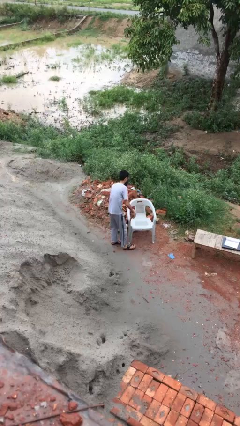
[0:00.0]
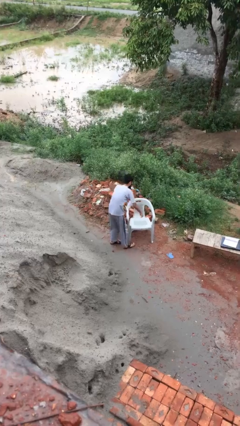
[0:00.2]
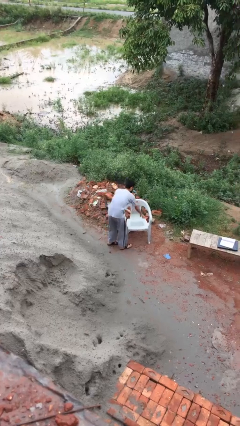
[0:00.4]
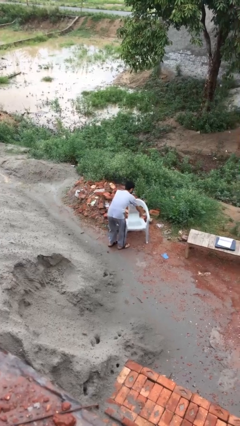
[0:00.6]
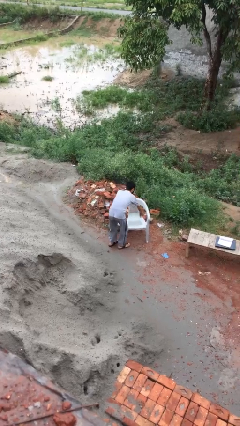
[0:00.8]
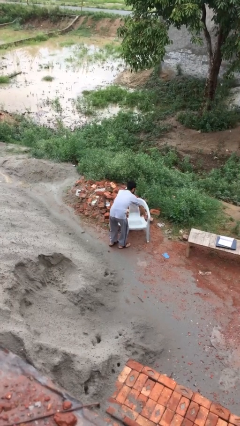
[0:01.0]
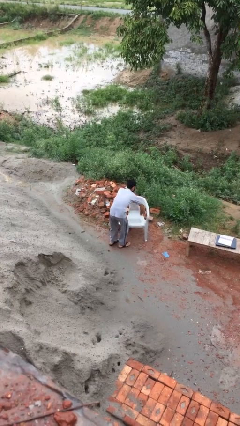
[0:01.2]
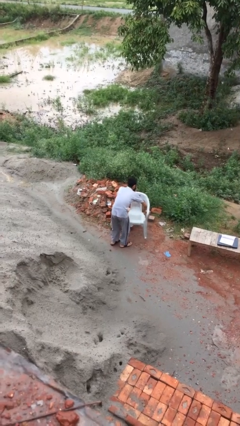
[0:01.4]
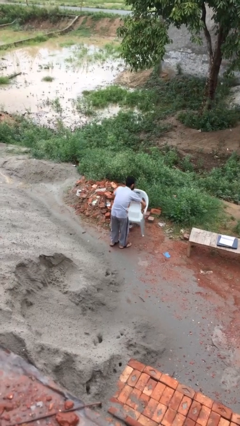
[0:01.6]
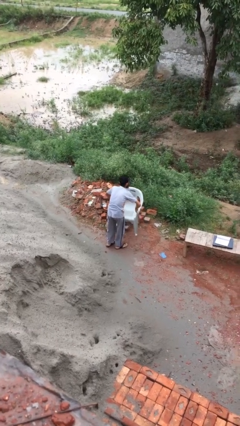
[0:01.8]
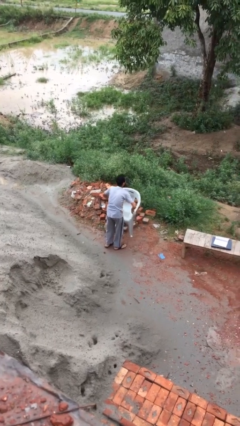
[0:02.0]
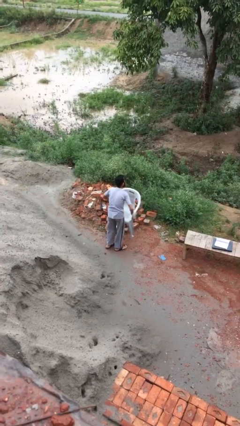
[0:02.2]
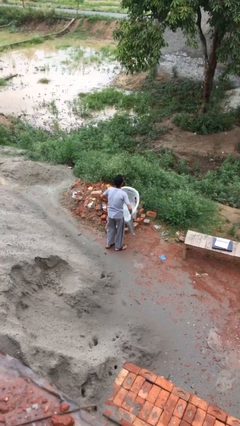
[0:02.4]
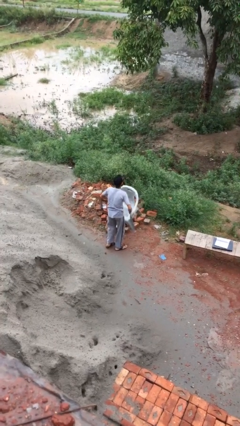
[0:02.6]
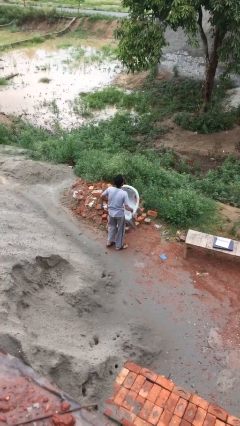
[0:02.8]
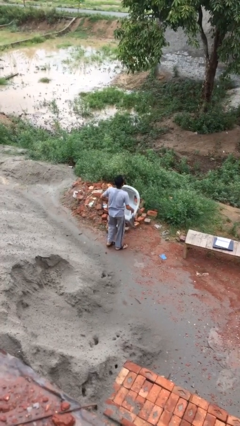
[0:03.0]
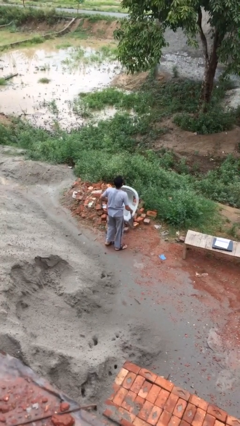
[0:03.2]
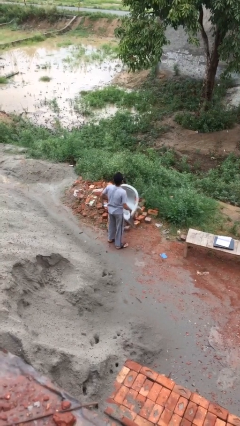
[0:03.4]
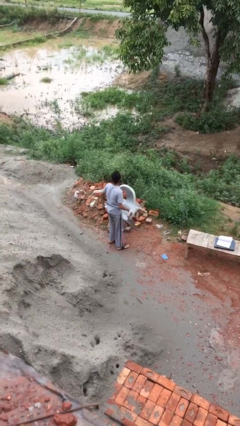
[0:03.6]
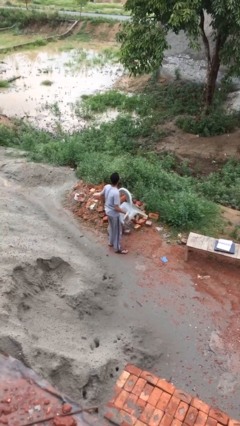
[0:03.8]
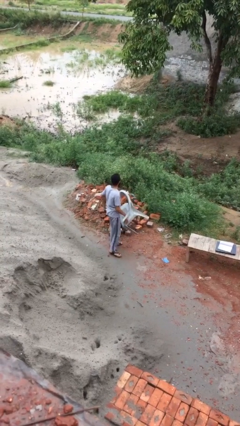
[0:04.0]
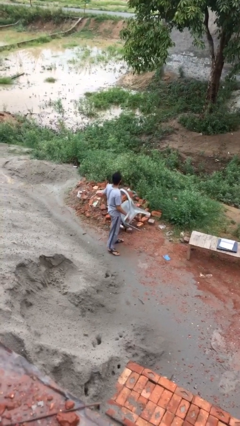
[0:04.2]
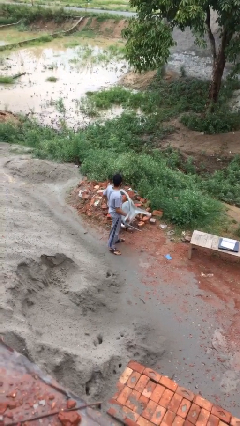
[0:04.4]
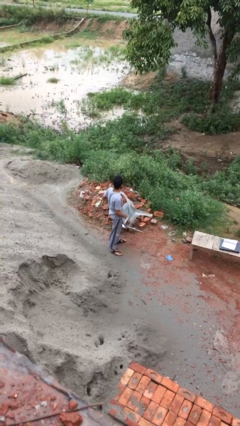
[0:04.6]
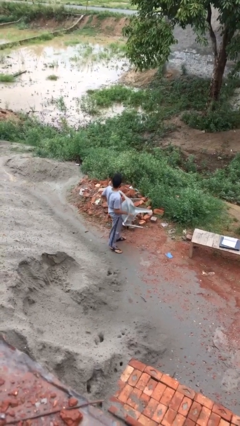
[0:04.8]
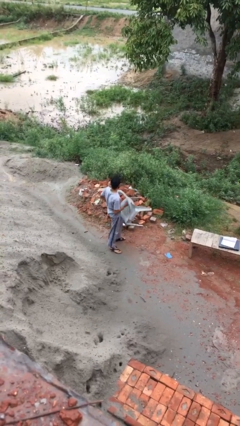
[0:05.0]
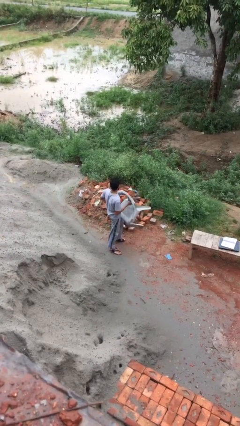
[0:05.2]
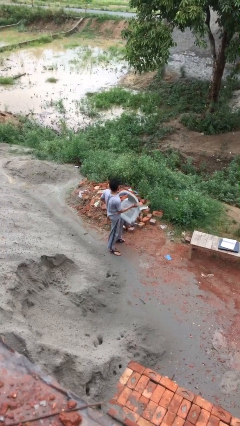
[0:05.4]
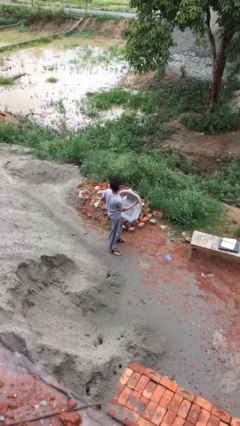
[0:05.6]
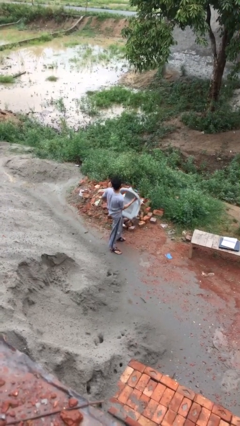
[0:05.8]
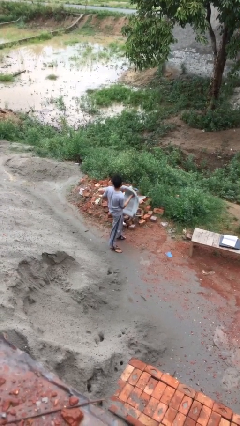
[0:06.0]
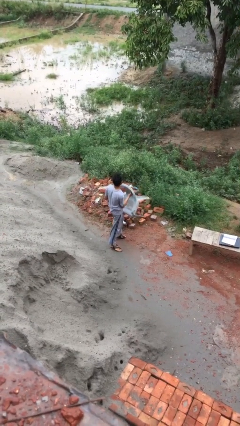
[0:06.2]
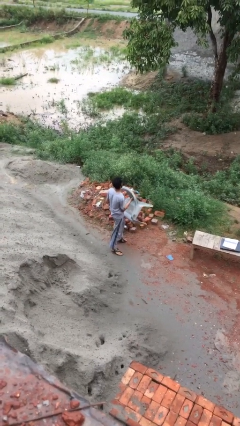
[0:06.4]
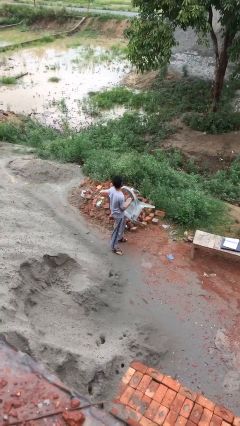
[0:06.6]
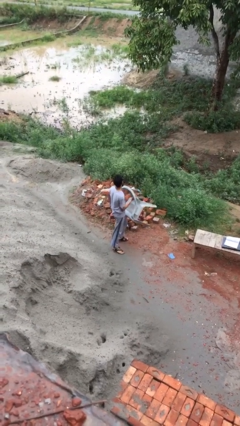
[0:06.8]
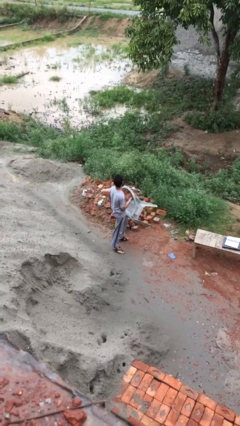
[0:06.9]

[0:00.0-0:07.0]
person carries heavy object

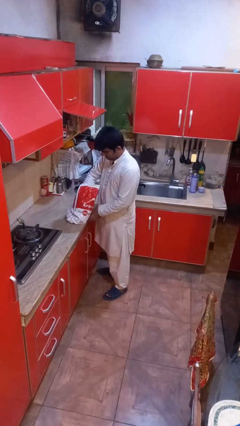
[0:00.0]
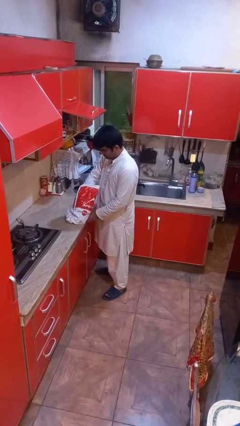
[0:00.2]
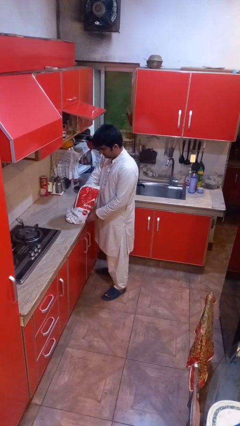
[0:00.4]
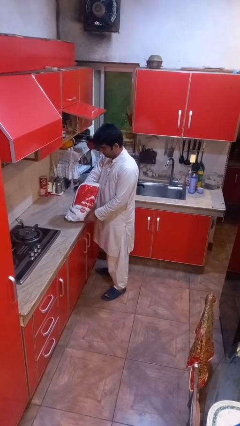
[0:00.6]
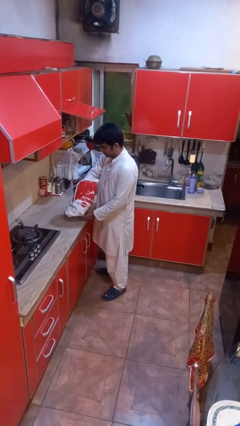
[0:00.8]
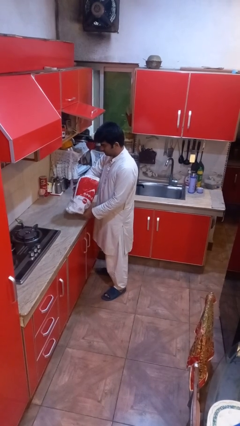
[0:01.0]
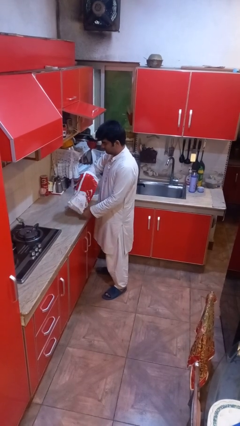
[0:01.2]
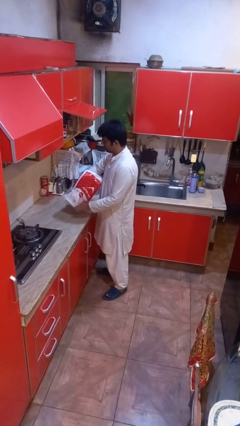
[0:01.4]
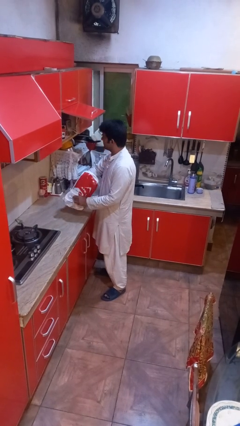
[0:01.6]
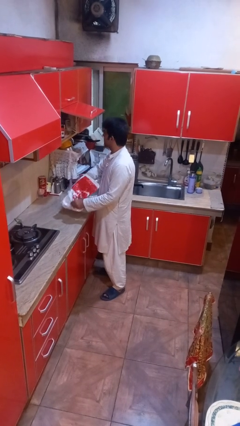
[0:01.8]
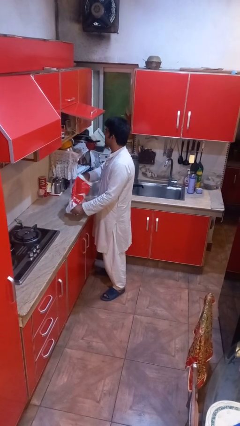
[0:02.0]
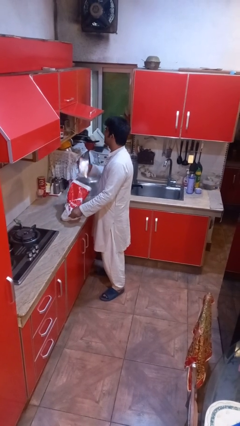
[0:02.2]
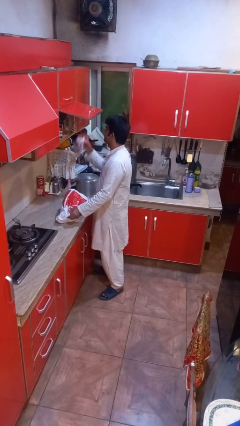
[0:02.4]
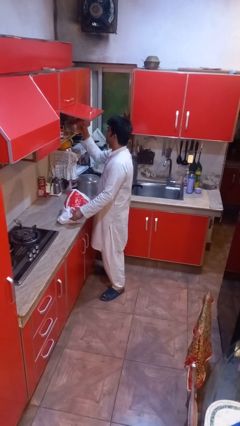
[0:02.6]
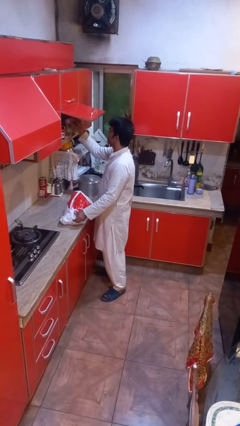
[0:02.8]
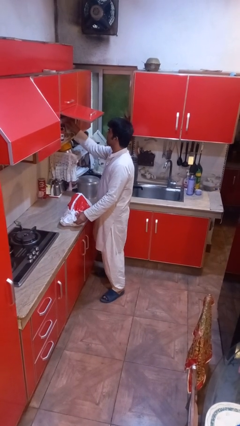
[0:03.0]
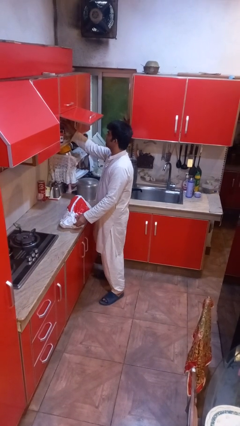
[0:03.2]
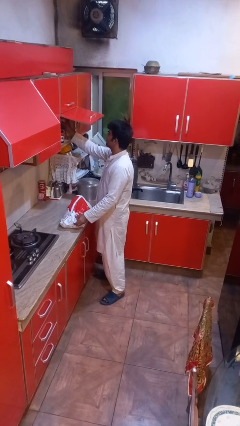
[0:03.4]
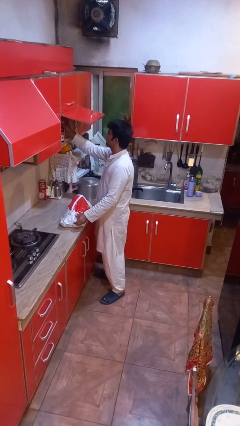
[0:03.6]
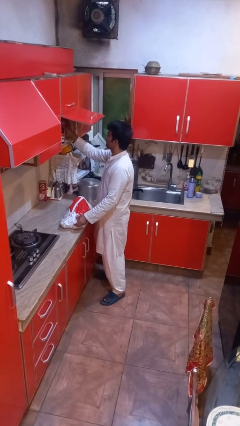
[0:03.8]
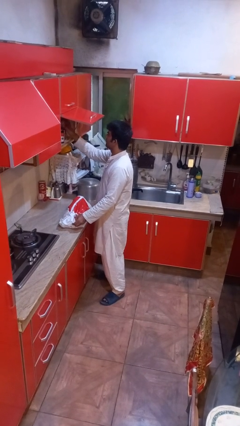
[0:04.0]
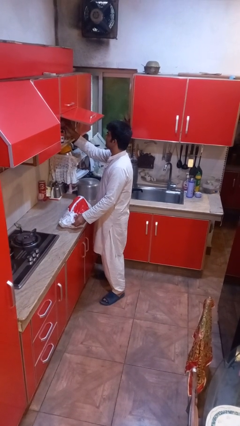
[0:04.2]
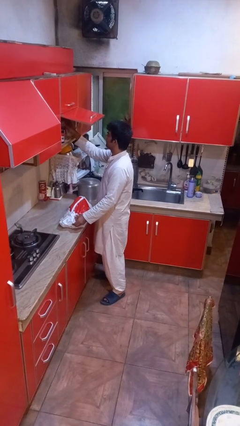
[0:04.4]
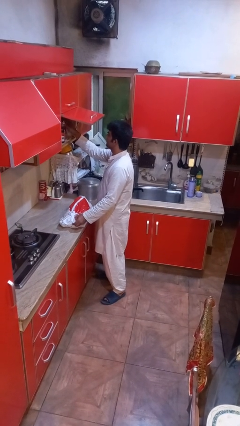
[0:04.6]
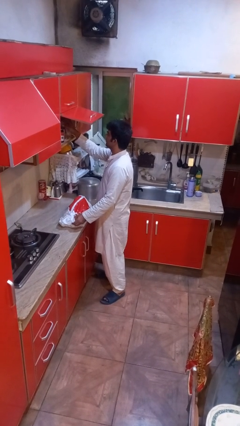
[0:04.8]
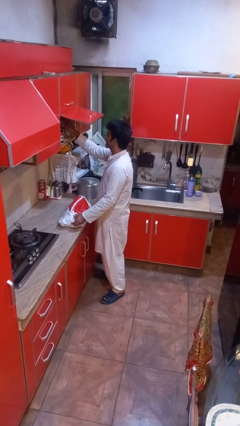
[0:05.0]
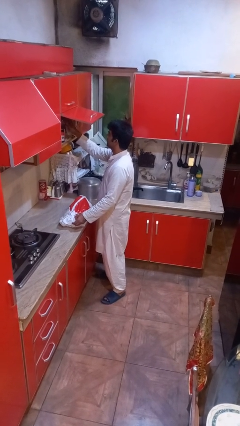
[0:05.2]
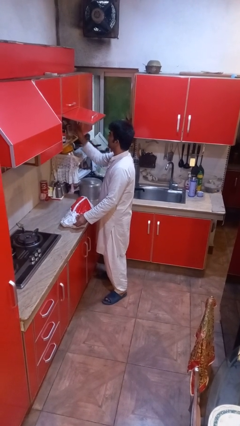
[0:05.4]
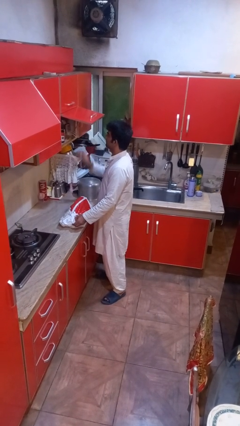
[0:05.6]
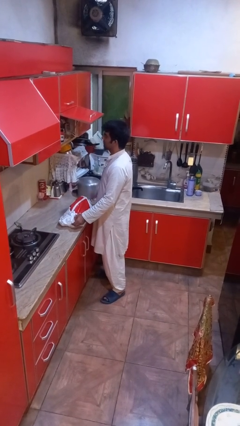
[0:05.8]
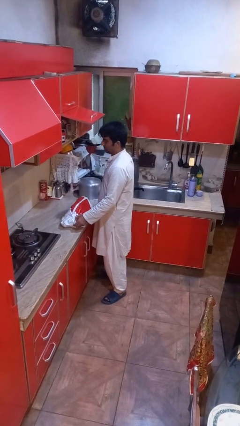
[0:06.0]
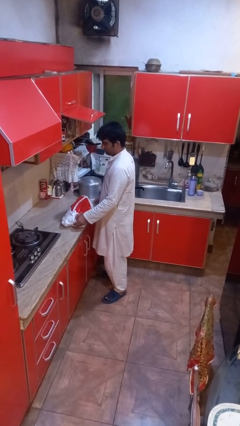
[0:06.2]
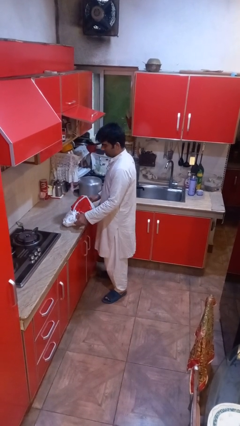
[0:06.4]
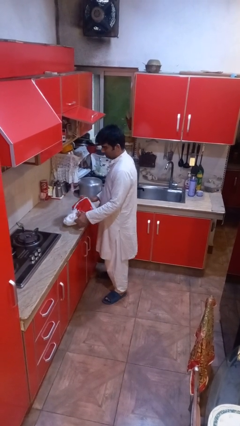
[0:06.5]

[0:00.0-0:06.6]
person loads groceries into cabinet

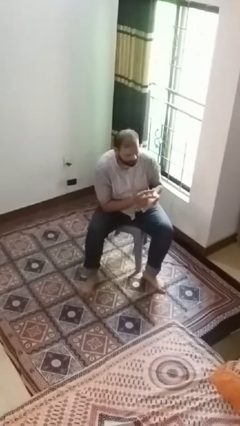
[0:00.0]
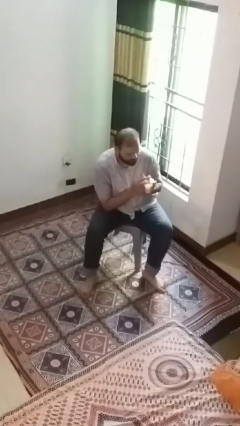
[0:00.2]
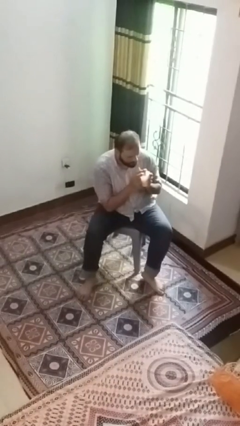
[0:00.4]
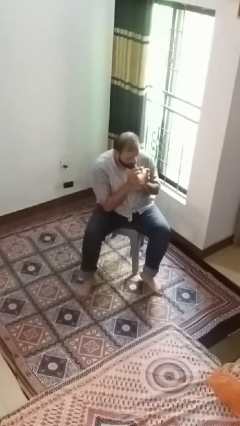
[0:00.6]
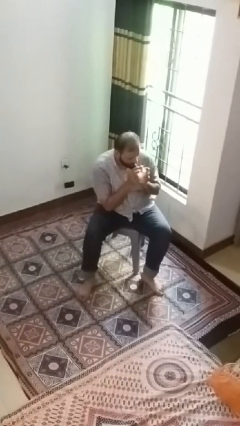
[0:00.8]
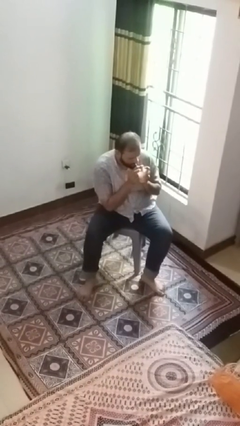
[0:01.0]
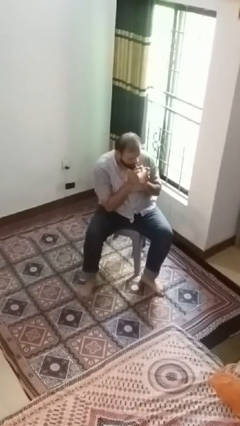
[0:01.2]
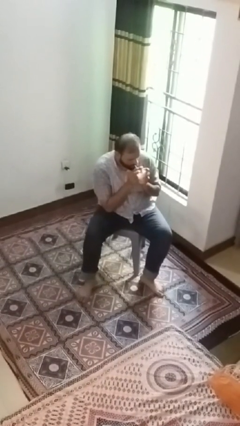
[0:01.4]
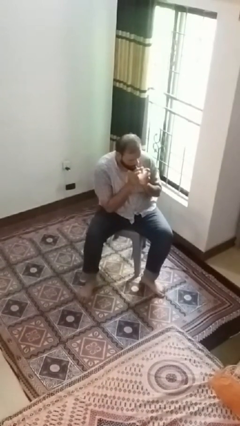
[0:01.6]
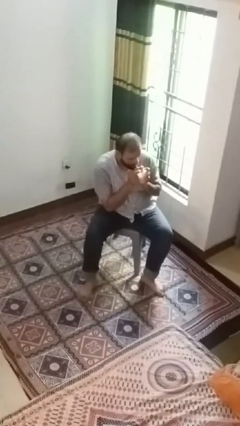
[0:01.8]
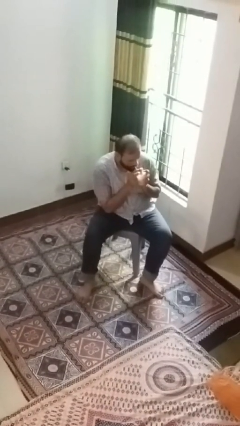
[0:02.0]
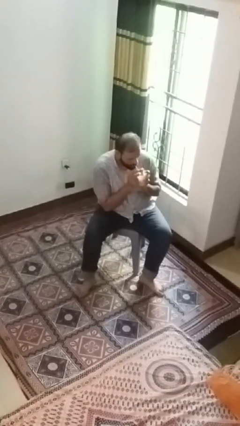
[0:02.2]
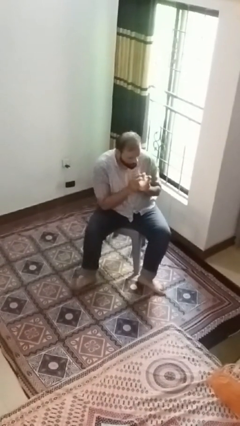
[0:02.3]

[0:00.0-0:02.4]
person drinks from straw

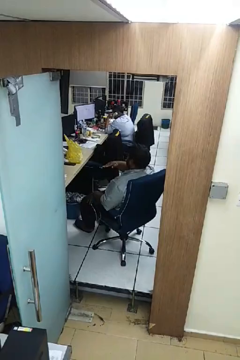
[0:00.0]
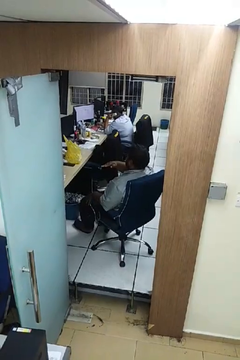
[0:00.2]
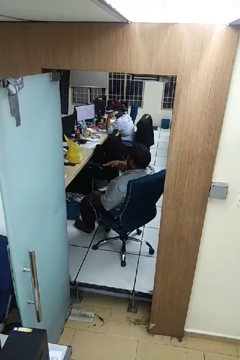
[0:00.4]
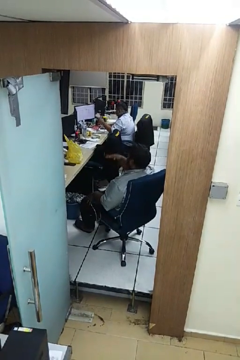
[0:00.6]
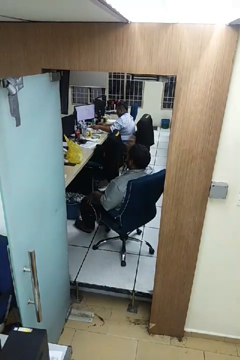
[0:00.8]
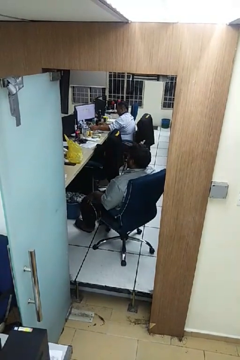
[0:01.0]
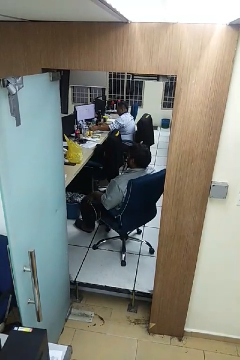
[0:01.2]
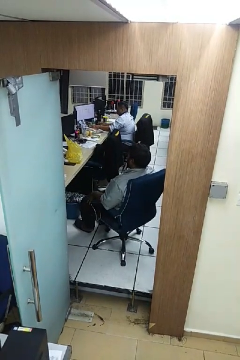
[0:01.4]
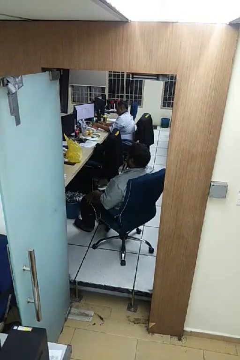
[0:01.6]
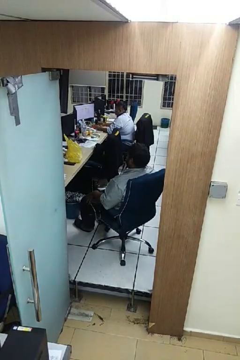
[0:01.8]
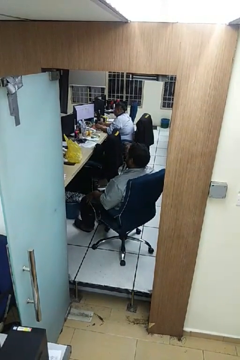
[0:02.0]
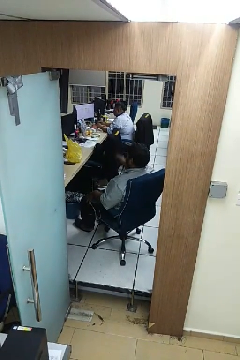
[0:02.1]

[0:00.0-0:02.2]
person gestures swipe right
